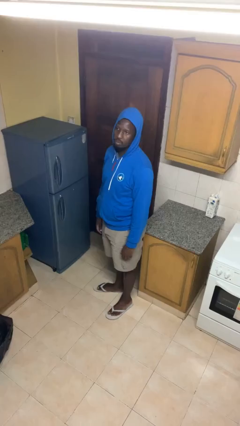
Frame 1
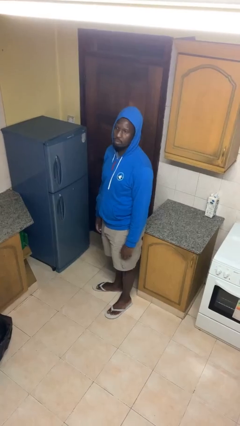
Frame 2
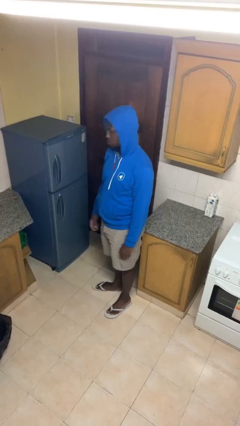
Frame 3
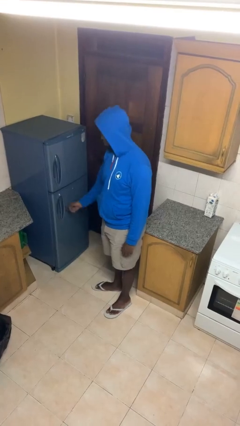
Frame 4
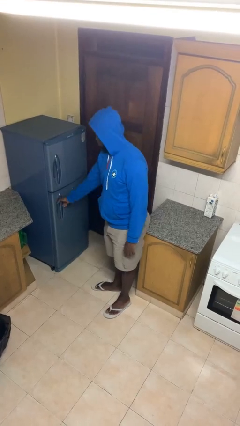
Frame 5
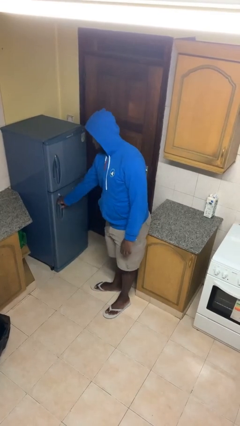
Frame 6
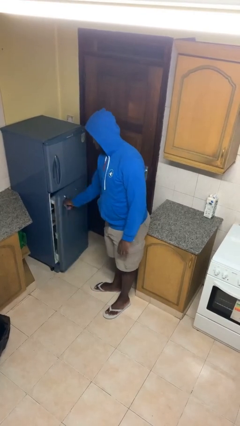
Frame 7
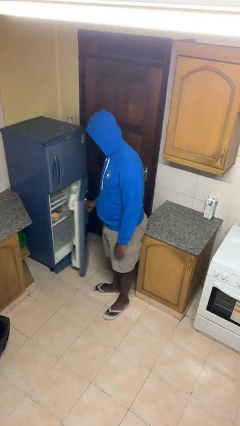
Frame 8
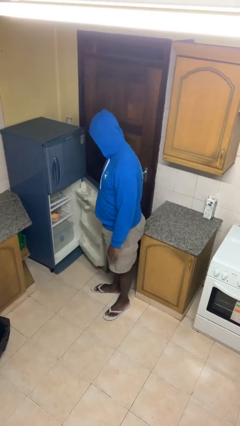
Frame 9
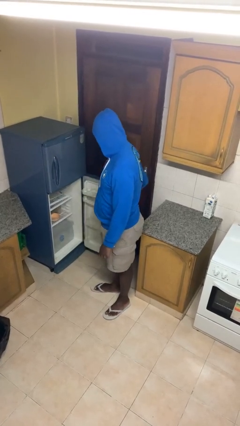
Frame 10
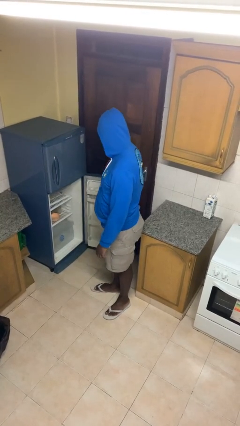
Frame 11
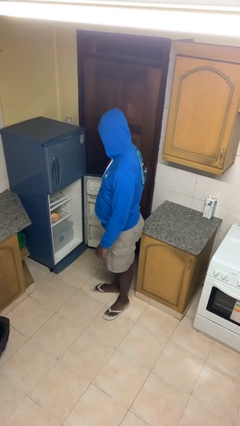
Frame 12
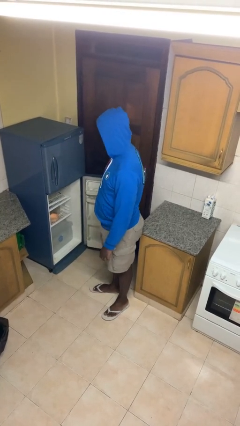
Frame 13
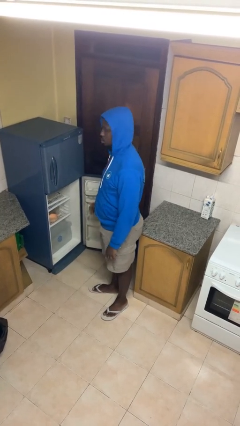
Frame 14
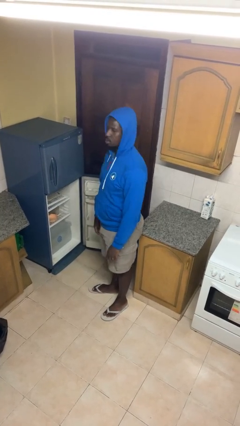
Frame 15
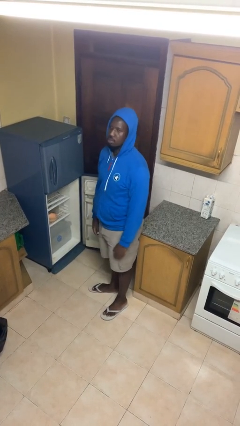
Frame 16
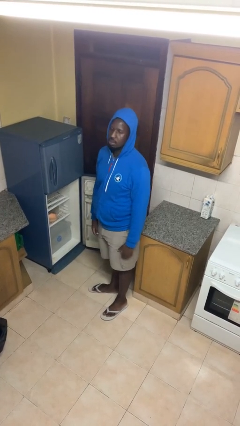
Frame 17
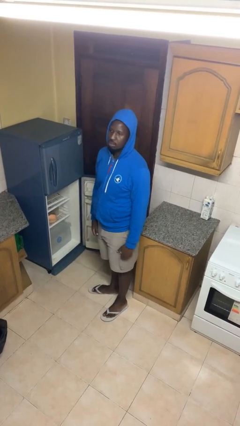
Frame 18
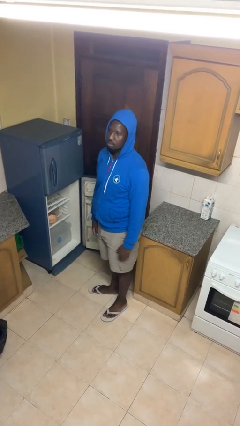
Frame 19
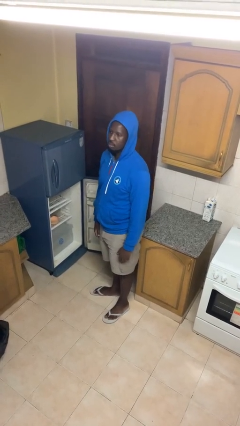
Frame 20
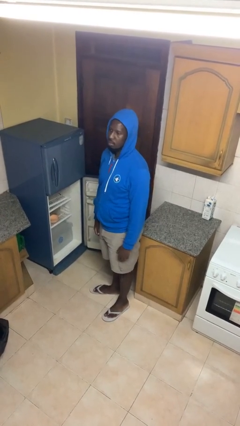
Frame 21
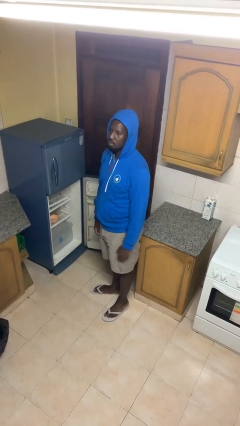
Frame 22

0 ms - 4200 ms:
person opens refrigerator

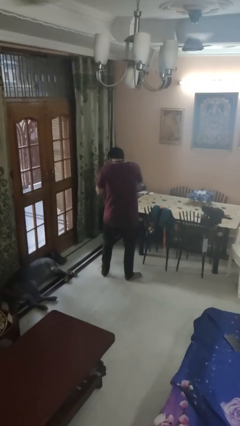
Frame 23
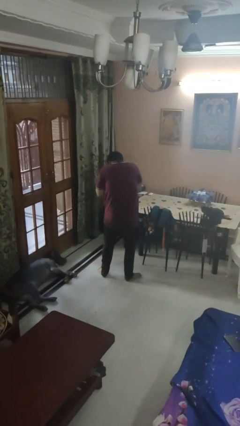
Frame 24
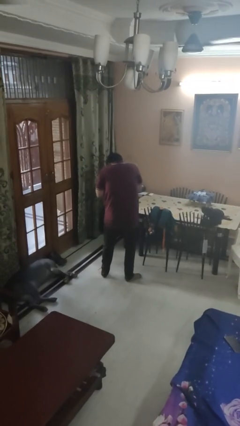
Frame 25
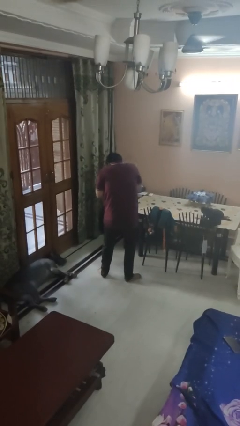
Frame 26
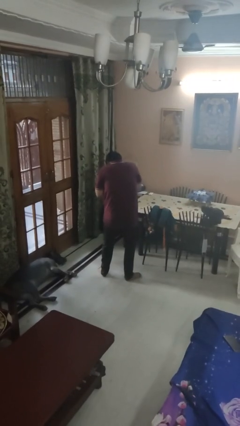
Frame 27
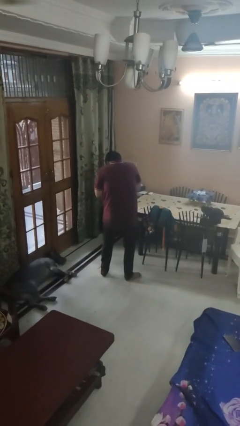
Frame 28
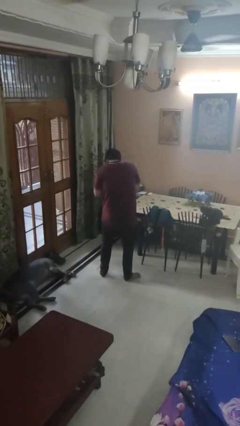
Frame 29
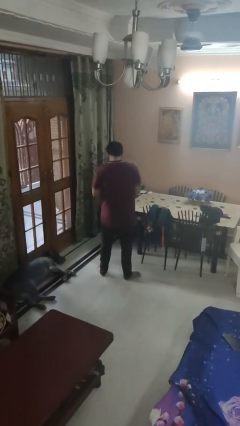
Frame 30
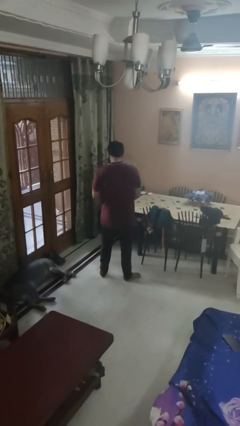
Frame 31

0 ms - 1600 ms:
person sneezes into hand

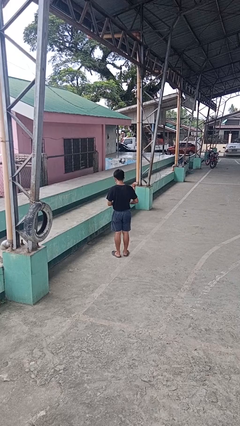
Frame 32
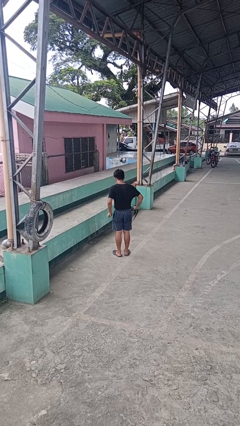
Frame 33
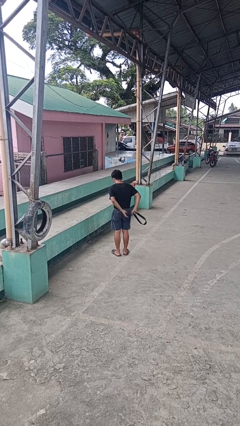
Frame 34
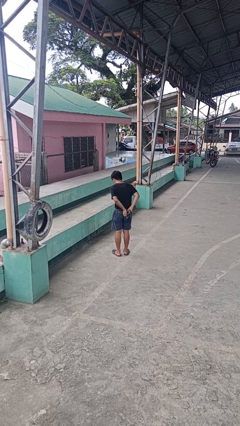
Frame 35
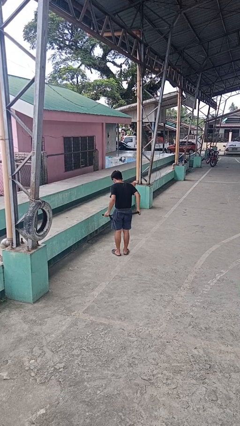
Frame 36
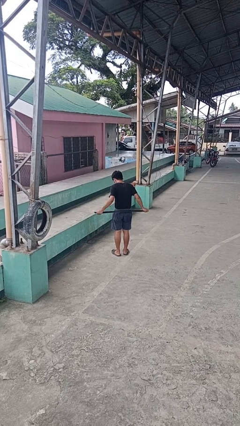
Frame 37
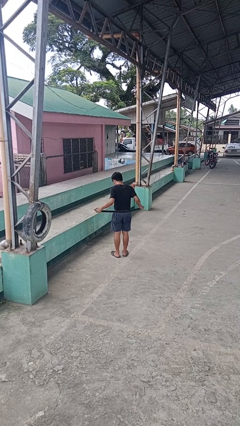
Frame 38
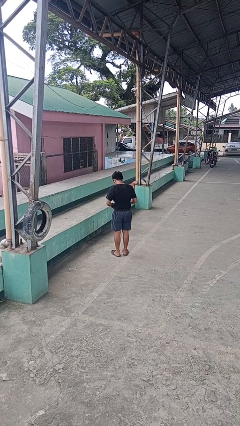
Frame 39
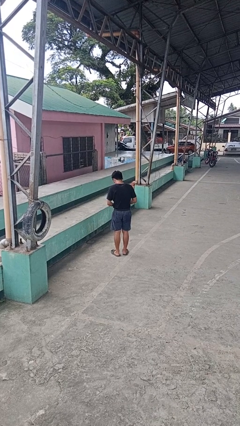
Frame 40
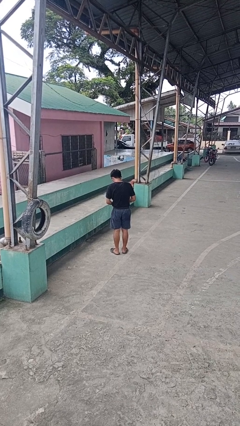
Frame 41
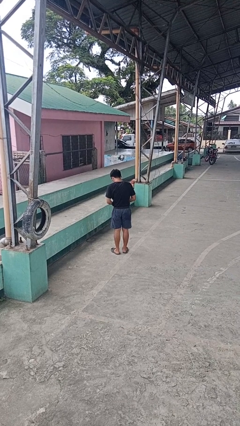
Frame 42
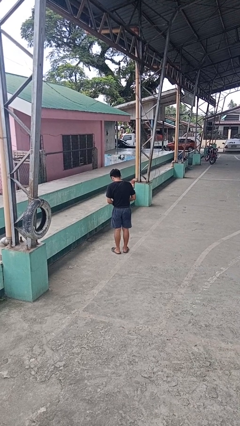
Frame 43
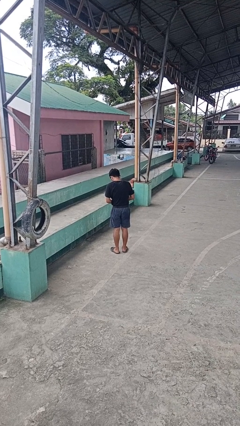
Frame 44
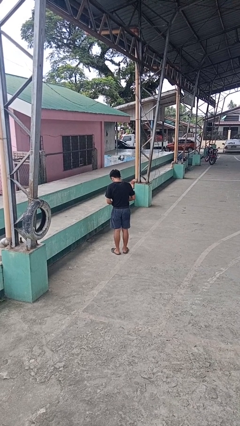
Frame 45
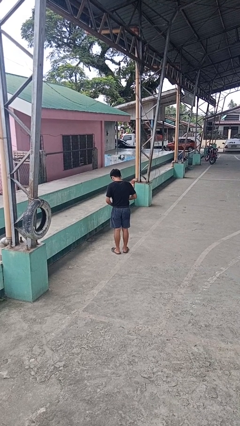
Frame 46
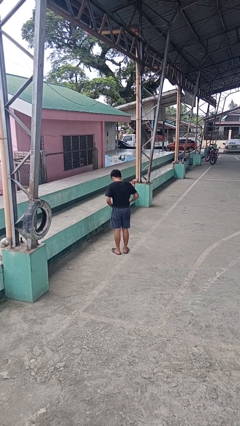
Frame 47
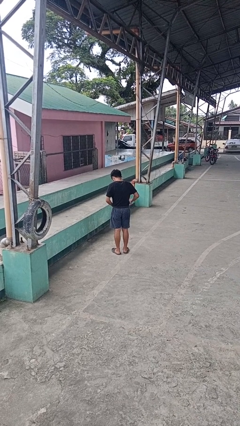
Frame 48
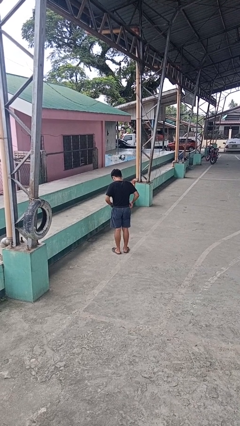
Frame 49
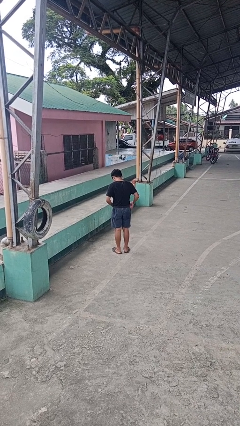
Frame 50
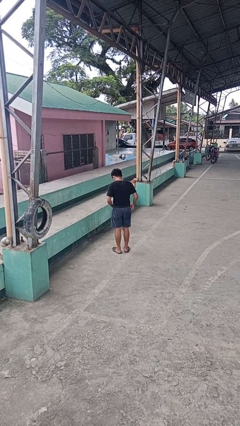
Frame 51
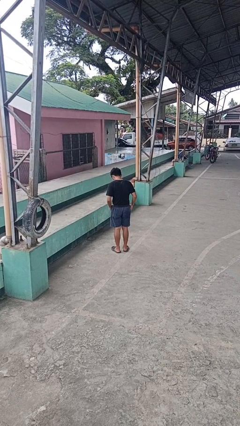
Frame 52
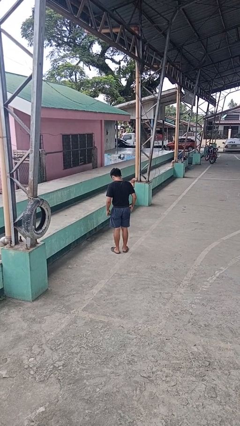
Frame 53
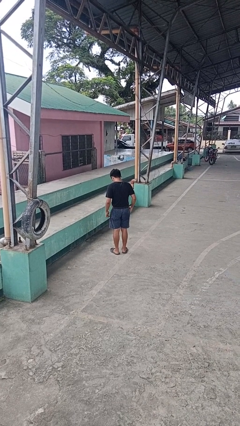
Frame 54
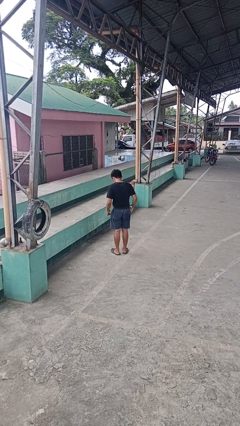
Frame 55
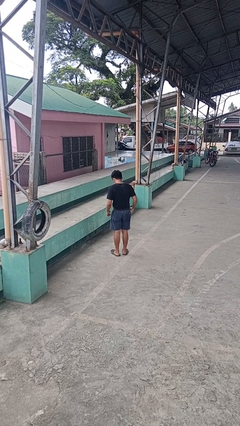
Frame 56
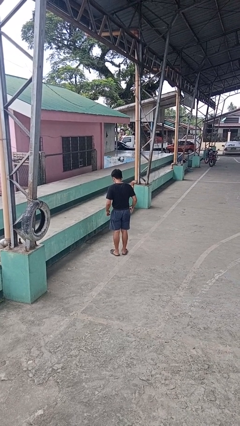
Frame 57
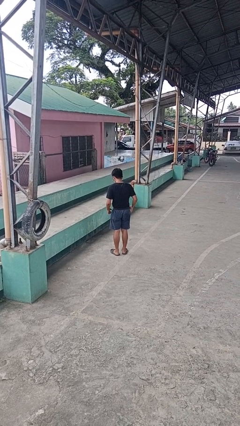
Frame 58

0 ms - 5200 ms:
person puts on belt

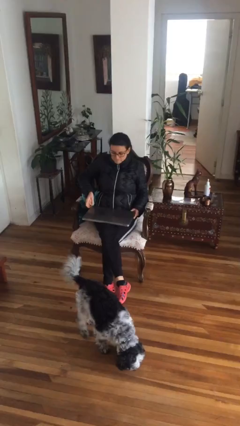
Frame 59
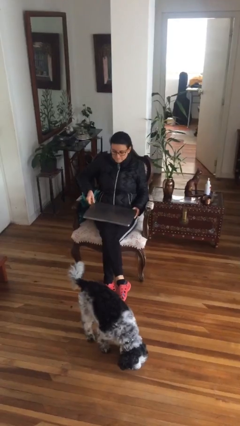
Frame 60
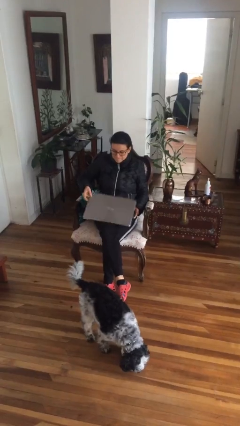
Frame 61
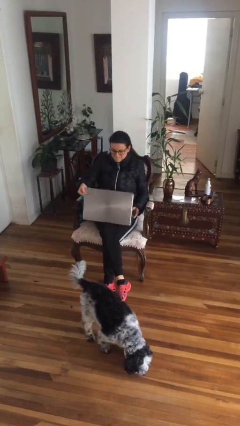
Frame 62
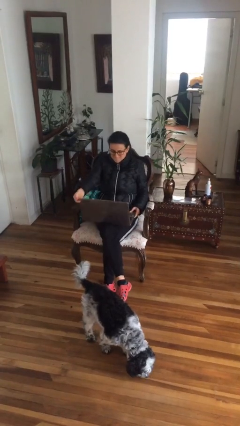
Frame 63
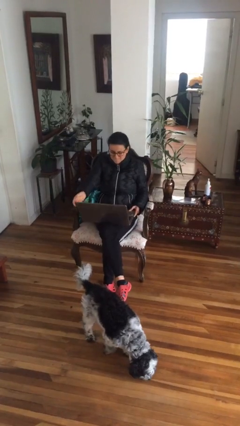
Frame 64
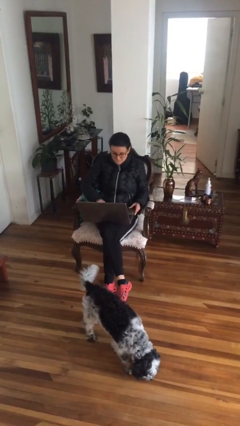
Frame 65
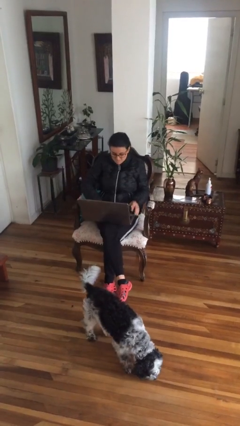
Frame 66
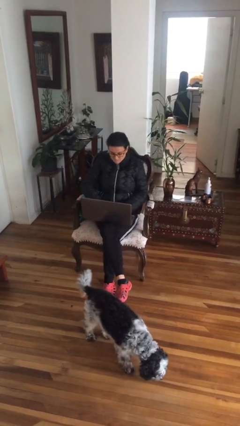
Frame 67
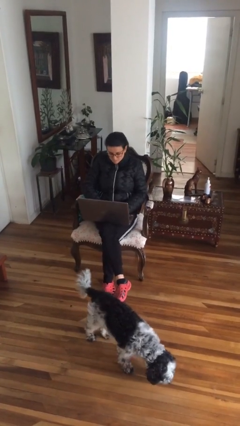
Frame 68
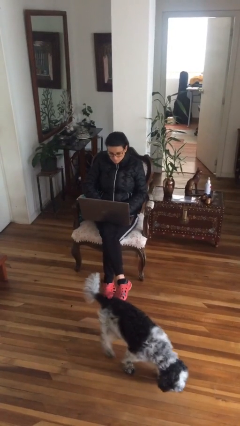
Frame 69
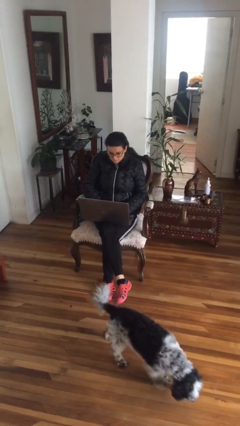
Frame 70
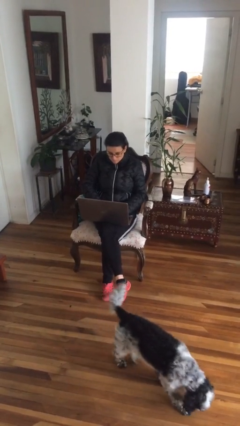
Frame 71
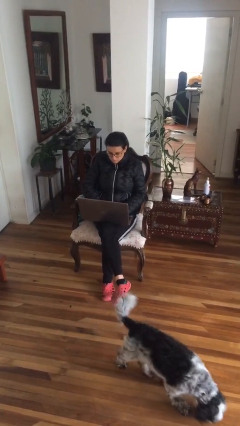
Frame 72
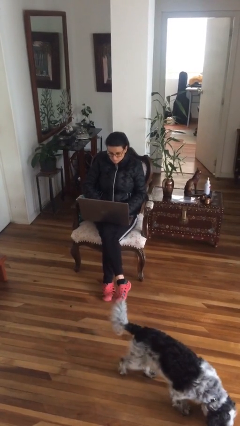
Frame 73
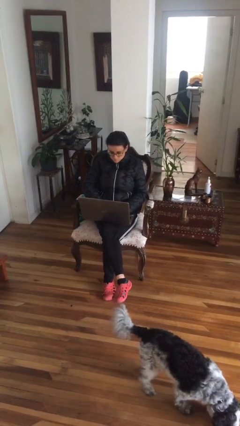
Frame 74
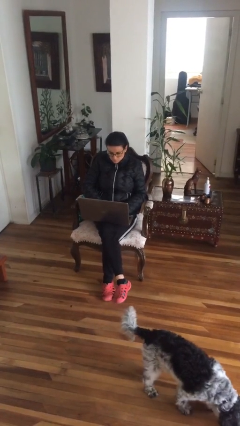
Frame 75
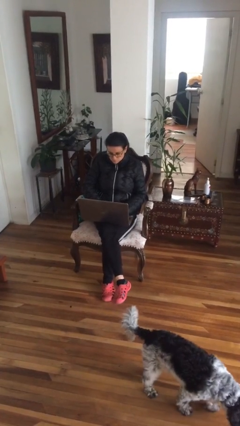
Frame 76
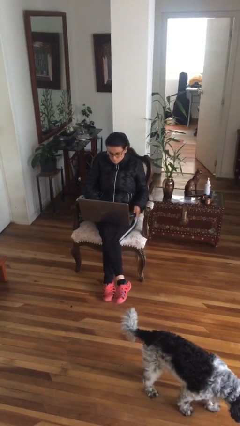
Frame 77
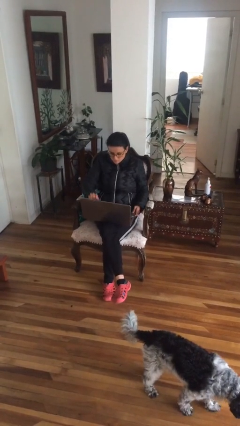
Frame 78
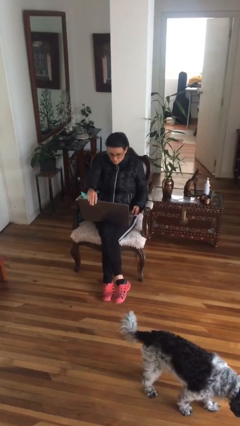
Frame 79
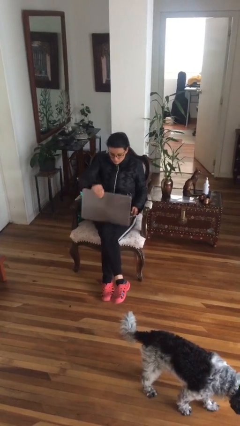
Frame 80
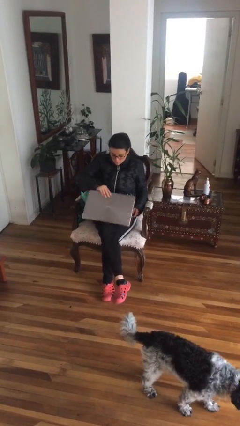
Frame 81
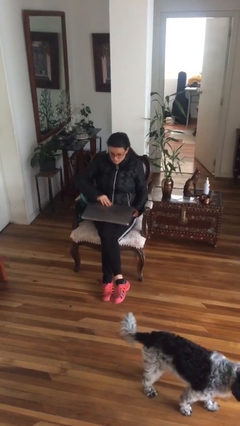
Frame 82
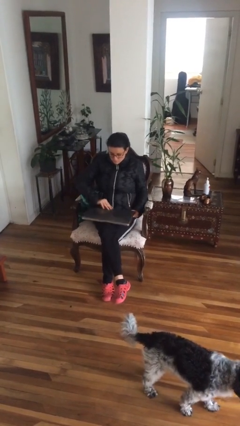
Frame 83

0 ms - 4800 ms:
person interacts with laptop

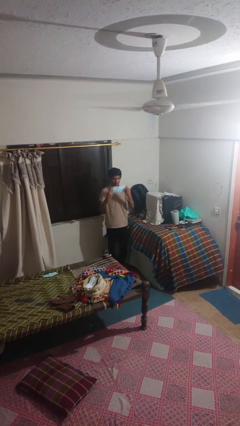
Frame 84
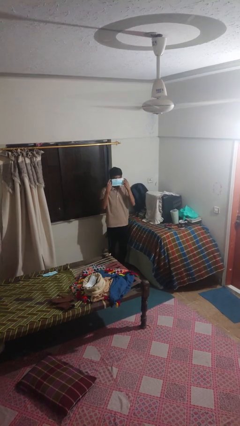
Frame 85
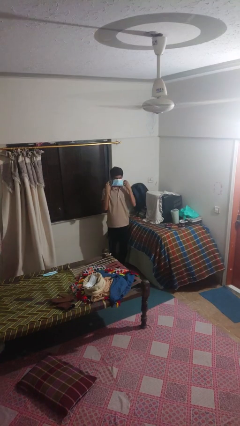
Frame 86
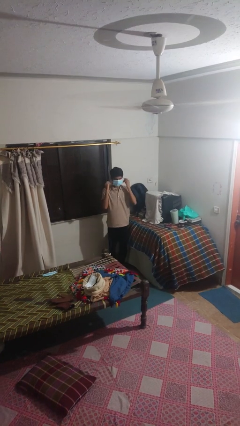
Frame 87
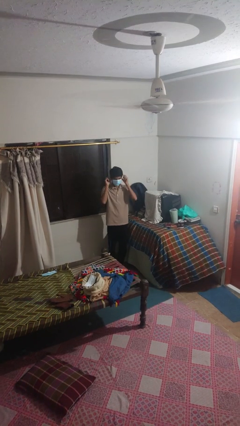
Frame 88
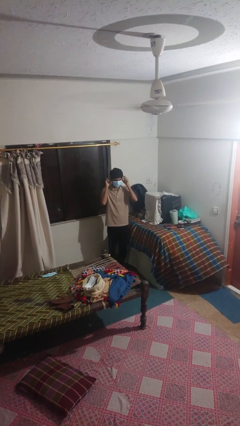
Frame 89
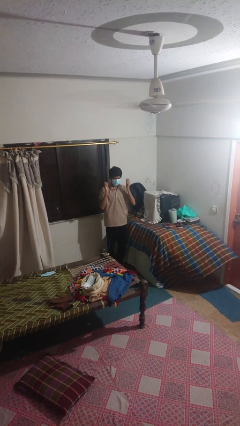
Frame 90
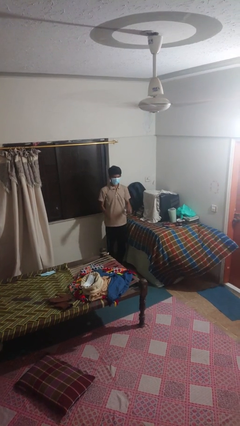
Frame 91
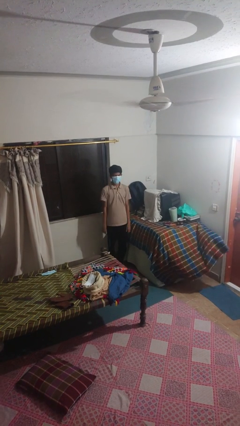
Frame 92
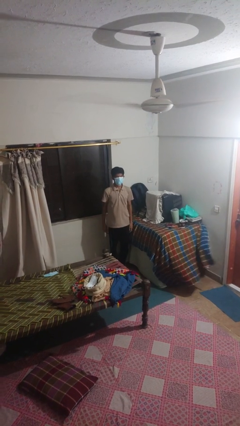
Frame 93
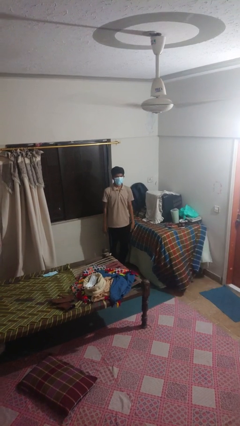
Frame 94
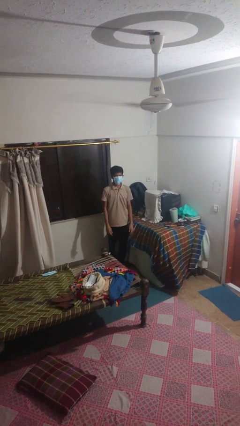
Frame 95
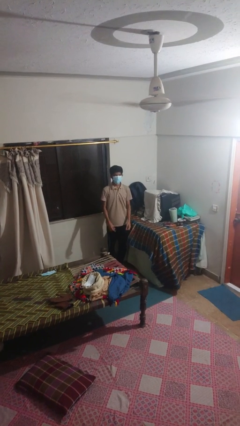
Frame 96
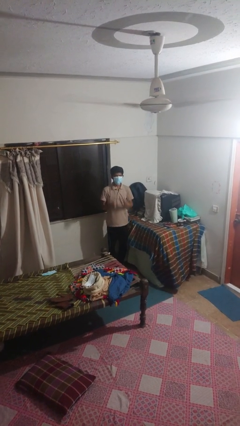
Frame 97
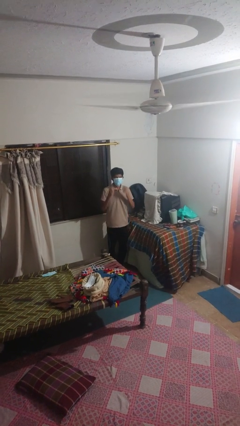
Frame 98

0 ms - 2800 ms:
person puts on facemask
